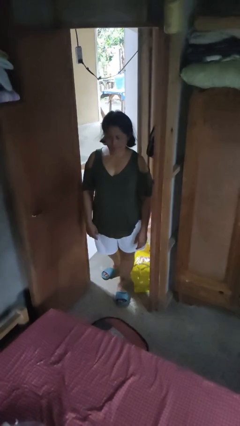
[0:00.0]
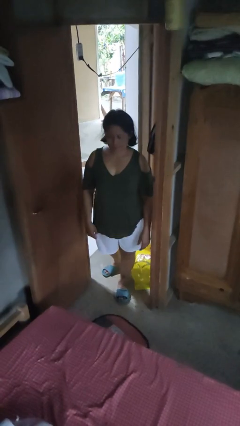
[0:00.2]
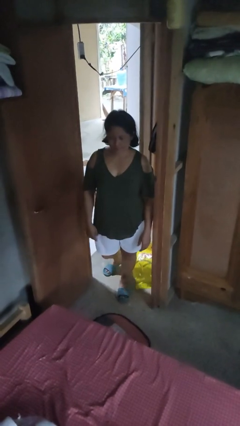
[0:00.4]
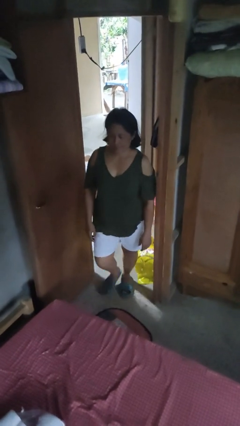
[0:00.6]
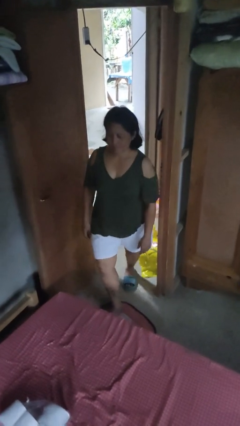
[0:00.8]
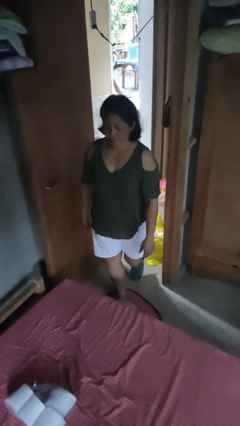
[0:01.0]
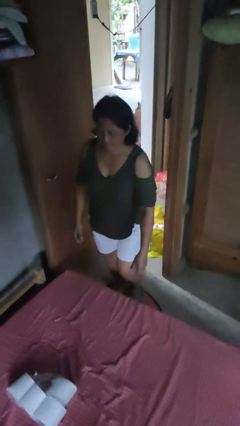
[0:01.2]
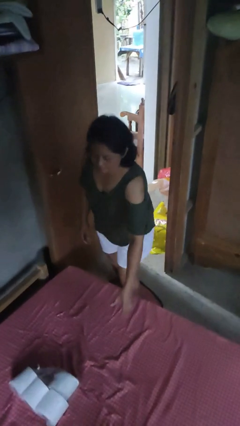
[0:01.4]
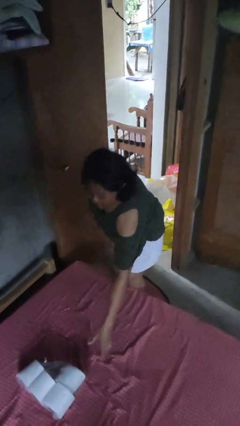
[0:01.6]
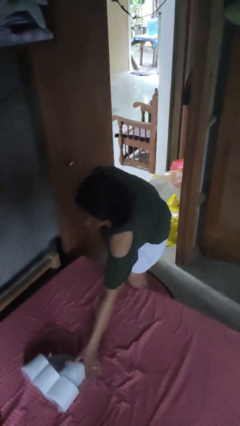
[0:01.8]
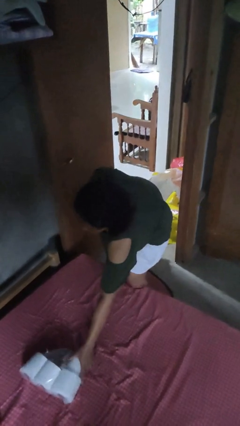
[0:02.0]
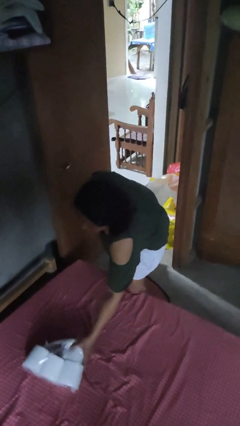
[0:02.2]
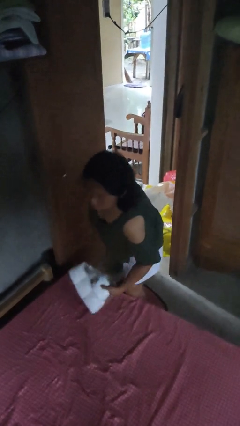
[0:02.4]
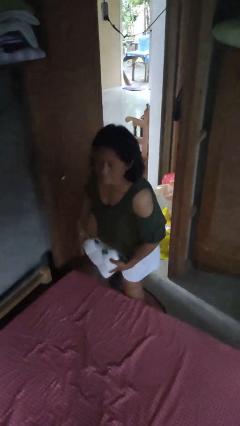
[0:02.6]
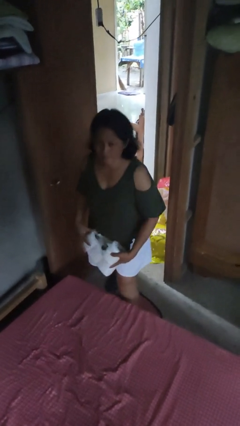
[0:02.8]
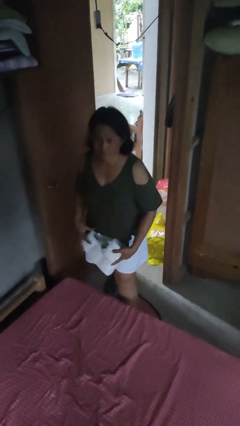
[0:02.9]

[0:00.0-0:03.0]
person picks up object from bed

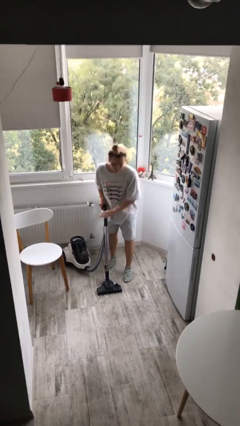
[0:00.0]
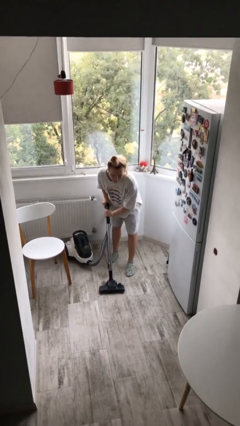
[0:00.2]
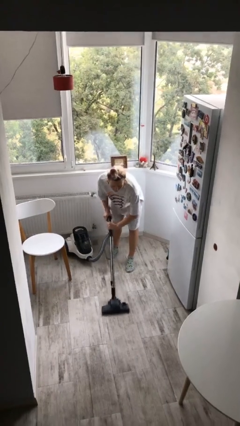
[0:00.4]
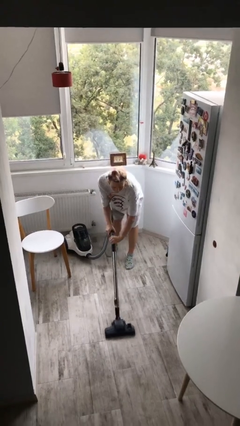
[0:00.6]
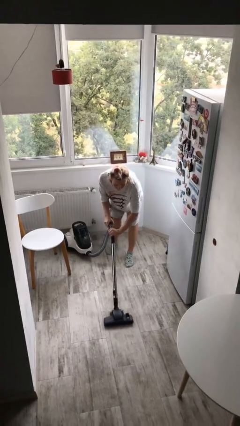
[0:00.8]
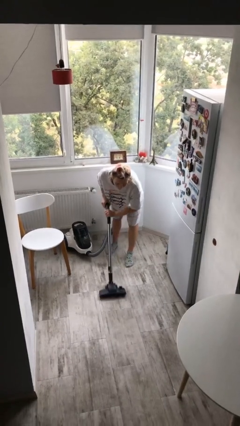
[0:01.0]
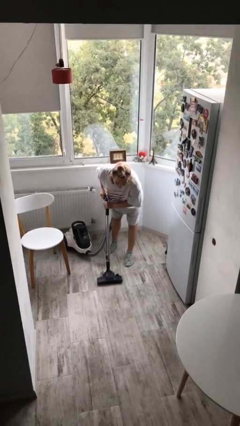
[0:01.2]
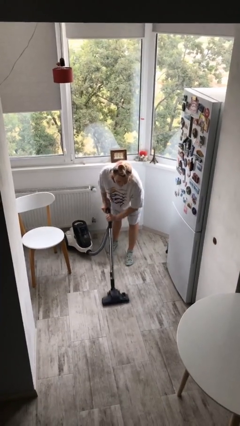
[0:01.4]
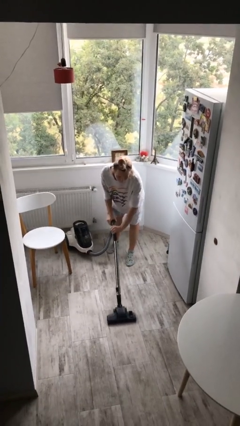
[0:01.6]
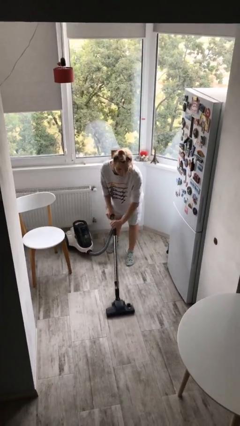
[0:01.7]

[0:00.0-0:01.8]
person vacuums carpet

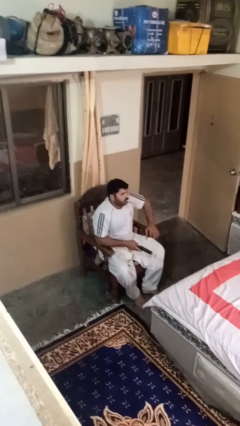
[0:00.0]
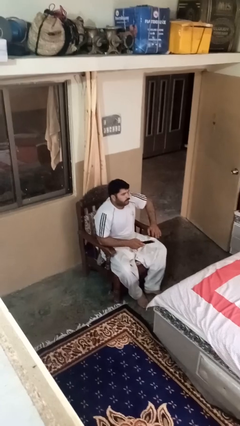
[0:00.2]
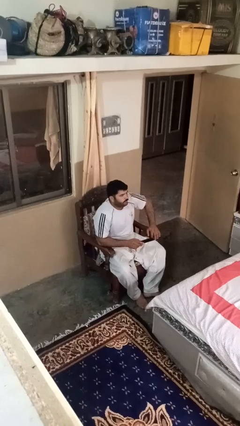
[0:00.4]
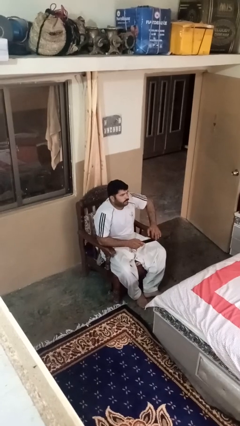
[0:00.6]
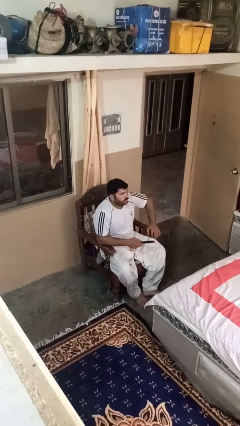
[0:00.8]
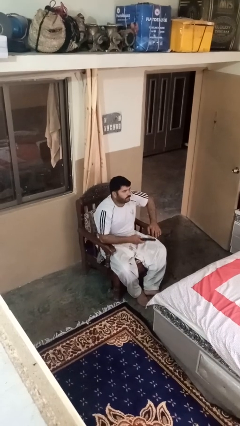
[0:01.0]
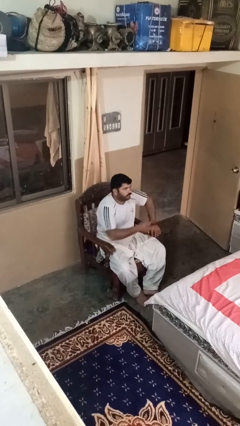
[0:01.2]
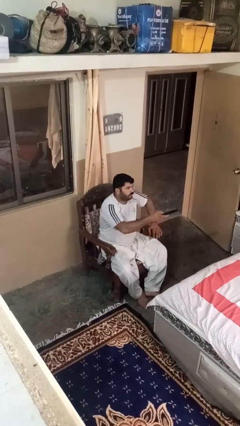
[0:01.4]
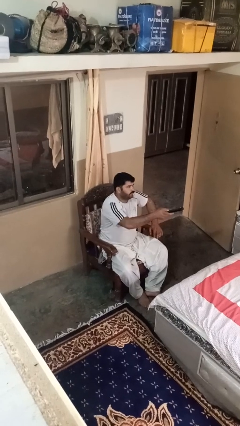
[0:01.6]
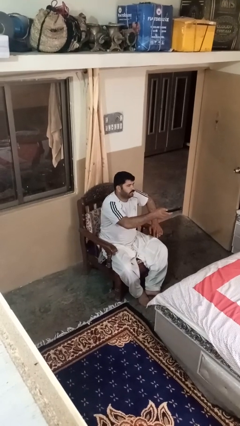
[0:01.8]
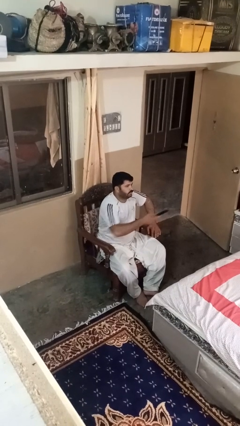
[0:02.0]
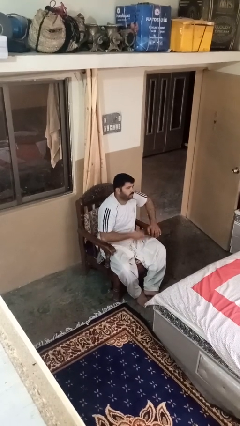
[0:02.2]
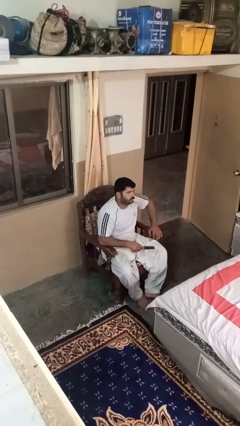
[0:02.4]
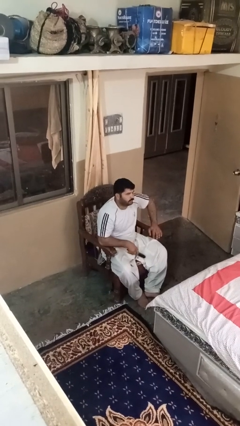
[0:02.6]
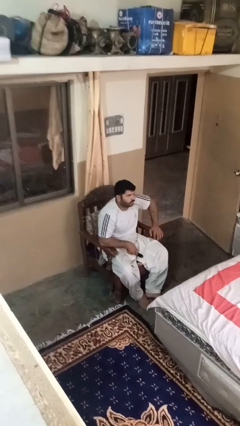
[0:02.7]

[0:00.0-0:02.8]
person uses television remote

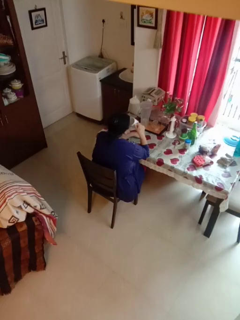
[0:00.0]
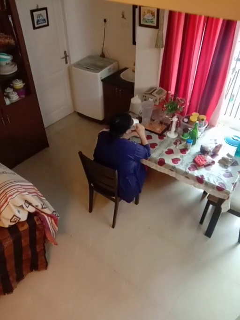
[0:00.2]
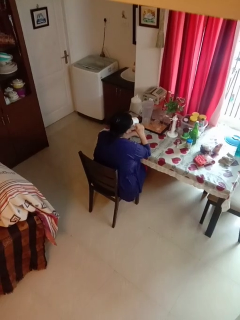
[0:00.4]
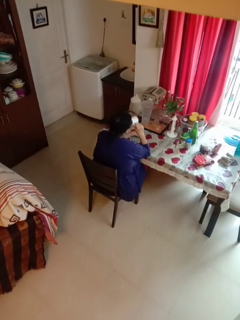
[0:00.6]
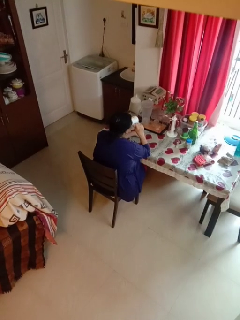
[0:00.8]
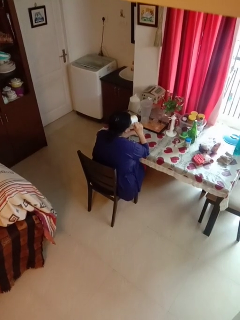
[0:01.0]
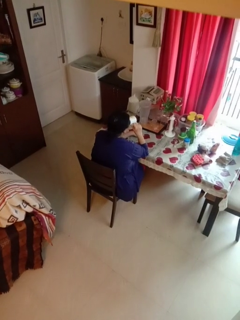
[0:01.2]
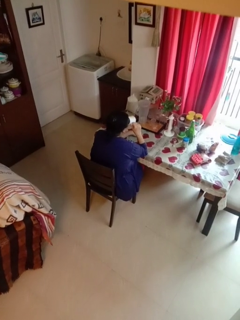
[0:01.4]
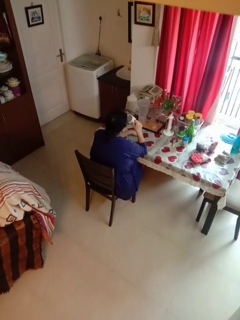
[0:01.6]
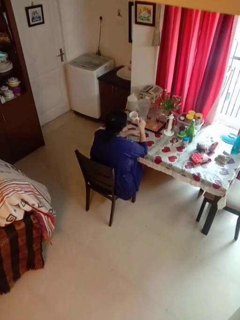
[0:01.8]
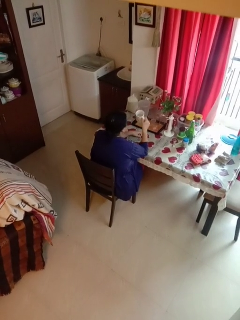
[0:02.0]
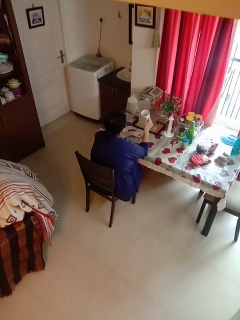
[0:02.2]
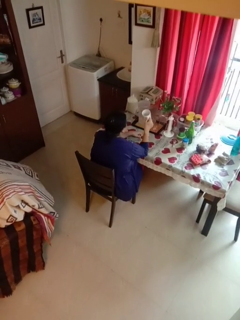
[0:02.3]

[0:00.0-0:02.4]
person drinks from mug

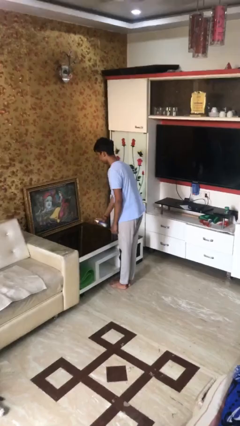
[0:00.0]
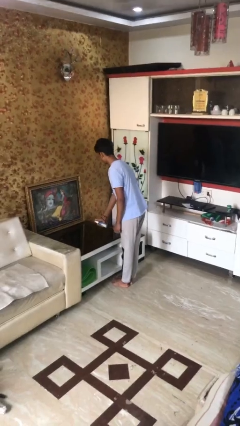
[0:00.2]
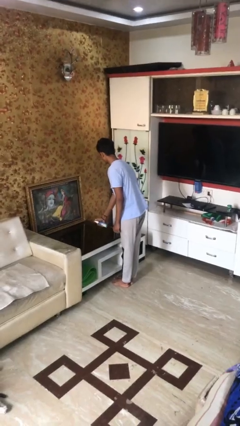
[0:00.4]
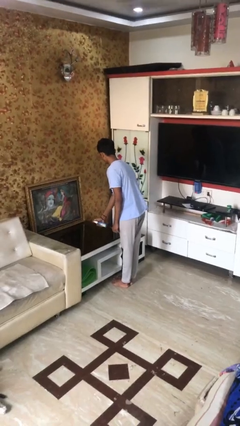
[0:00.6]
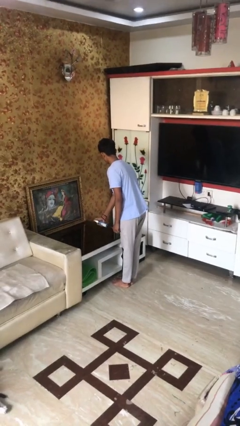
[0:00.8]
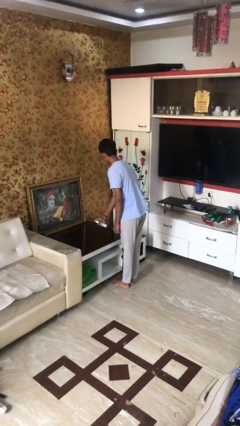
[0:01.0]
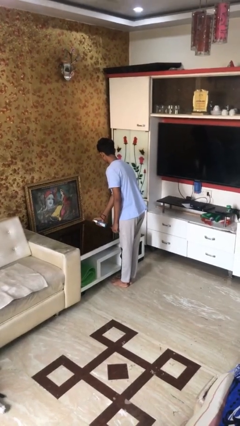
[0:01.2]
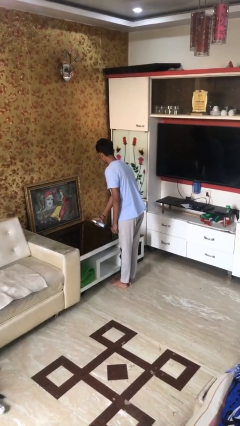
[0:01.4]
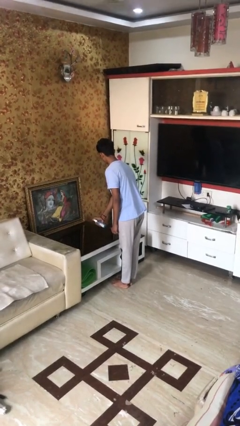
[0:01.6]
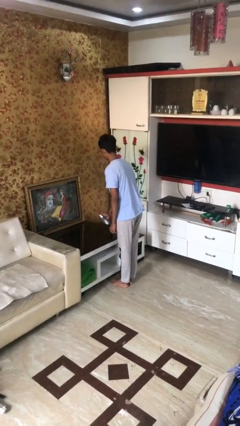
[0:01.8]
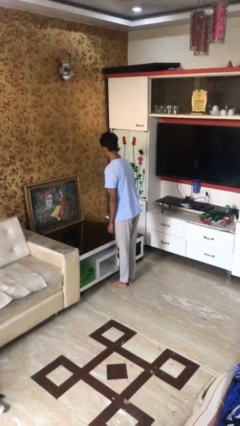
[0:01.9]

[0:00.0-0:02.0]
person sprays from bottle

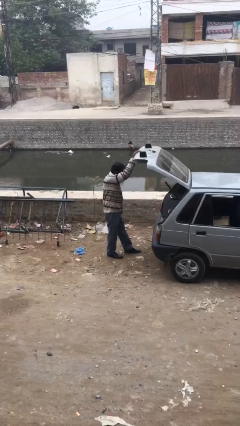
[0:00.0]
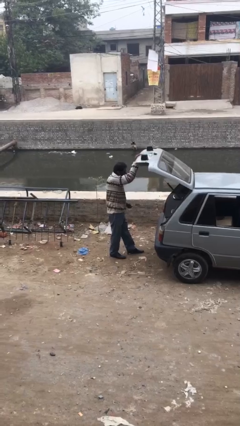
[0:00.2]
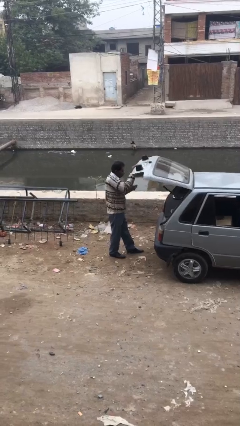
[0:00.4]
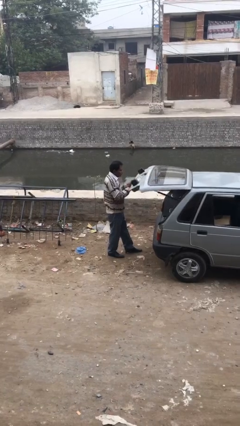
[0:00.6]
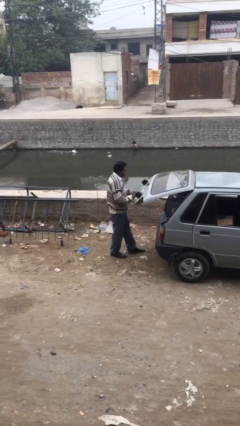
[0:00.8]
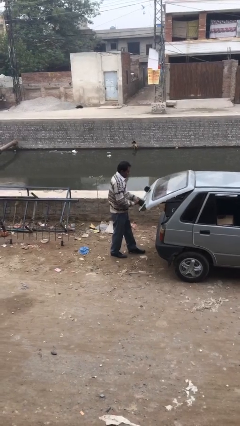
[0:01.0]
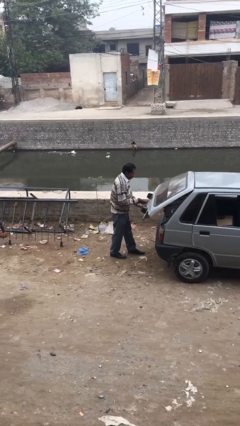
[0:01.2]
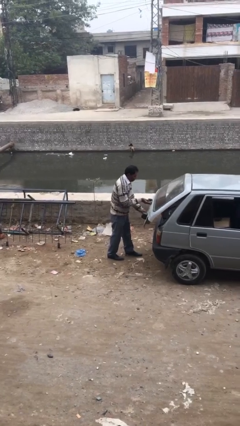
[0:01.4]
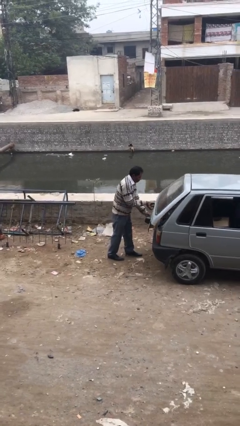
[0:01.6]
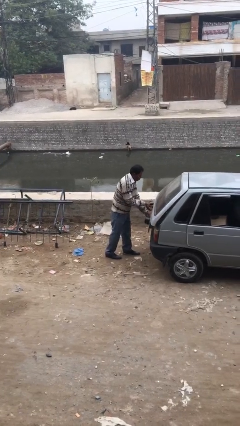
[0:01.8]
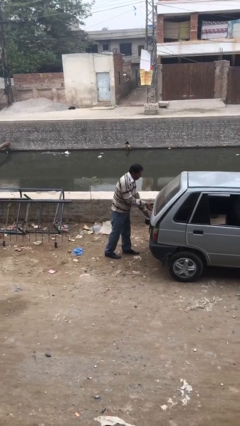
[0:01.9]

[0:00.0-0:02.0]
person closes car trunk

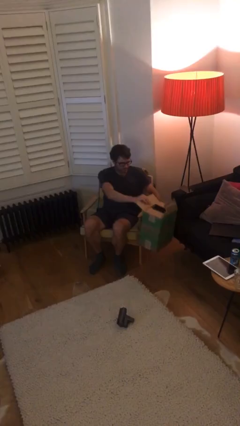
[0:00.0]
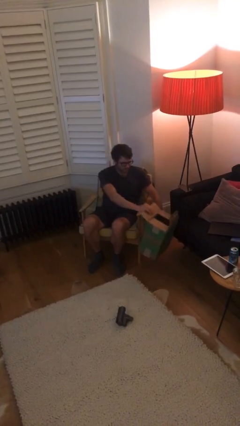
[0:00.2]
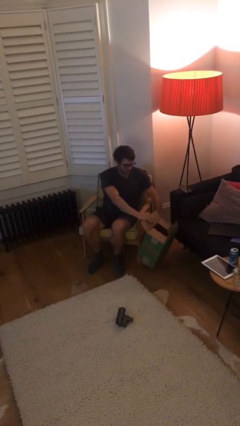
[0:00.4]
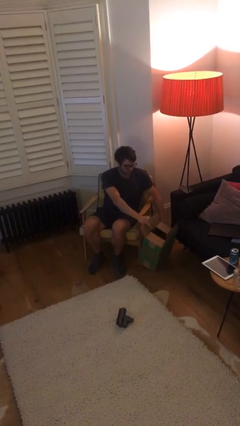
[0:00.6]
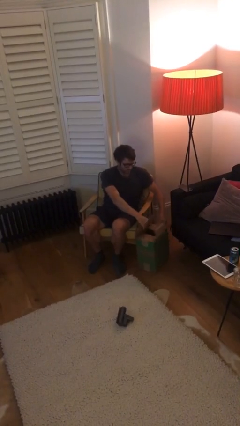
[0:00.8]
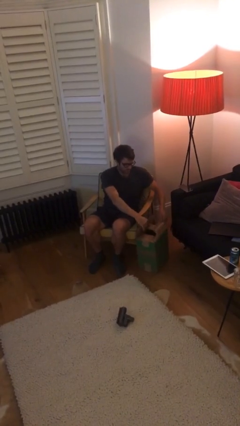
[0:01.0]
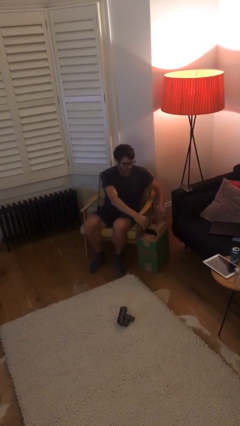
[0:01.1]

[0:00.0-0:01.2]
person puts down object on floor

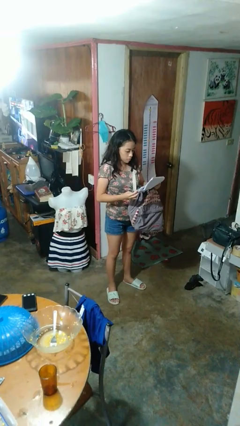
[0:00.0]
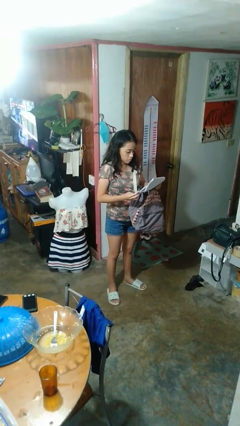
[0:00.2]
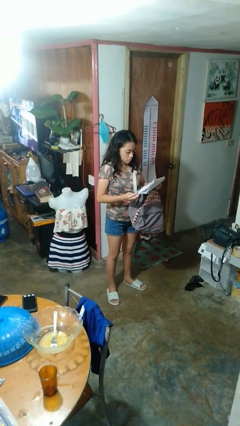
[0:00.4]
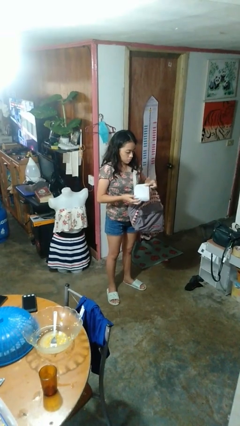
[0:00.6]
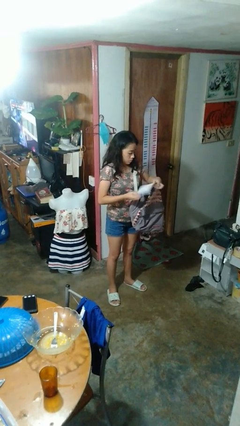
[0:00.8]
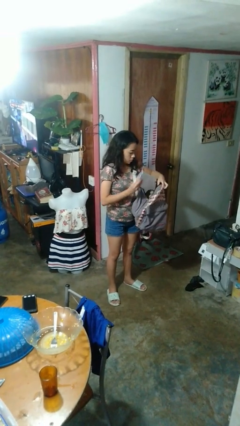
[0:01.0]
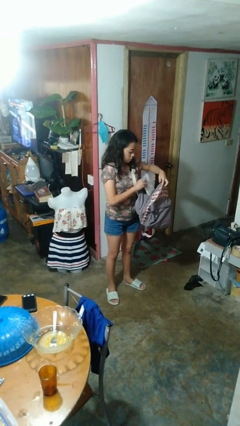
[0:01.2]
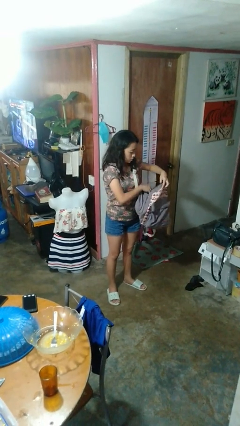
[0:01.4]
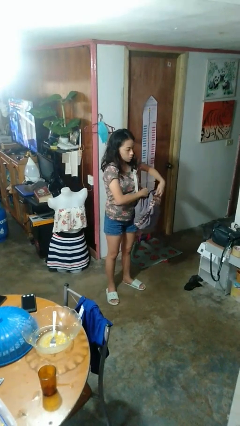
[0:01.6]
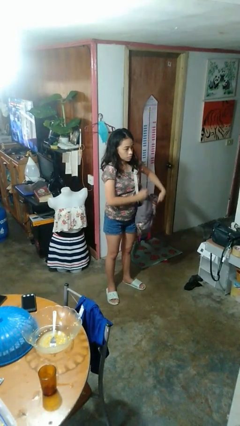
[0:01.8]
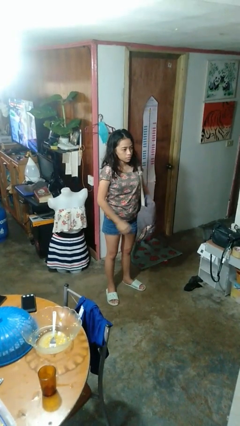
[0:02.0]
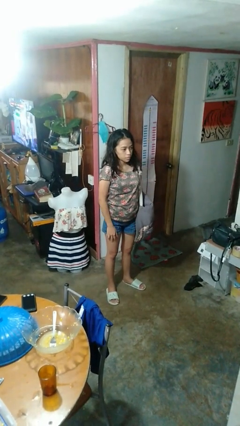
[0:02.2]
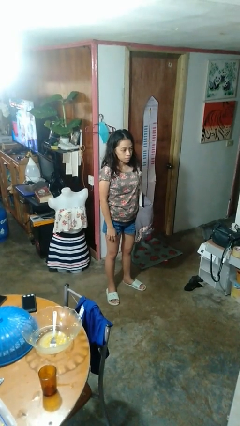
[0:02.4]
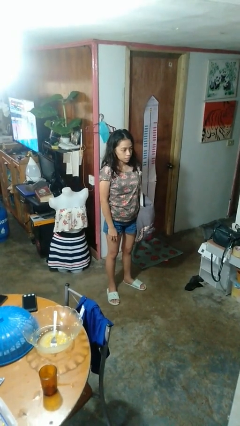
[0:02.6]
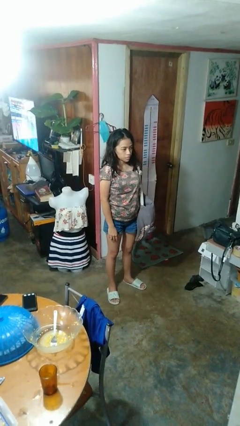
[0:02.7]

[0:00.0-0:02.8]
person puts object into backpack
